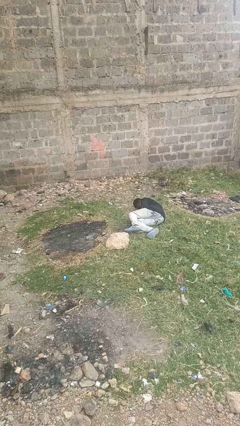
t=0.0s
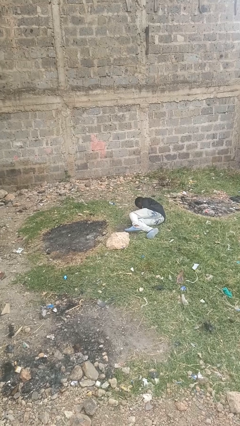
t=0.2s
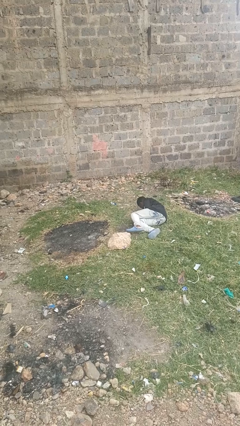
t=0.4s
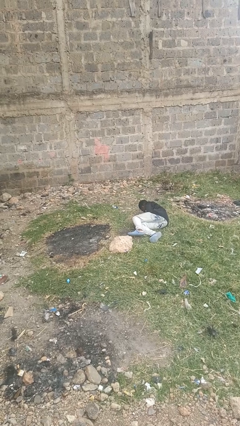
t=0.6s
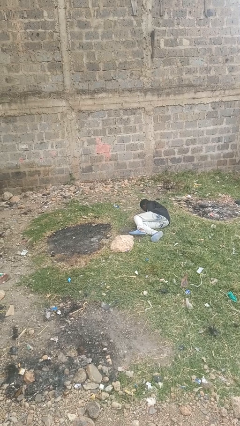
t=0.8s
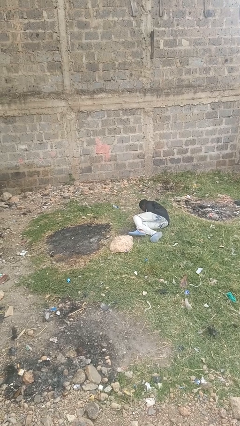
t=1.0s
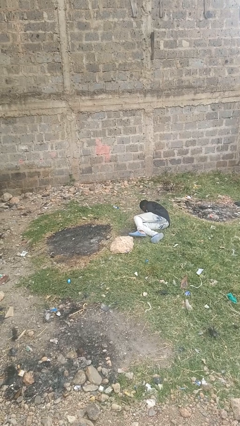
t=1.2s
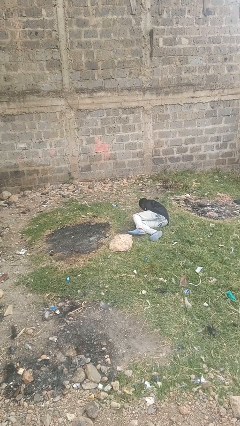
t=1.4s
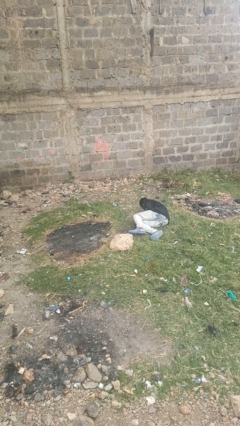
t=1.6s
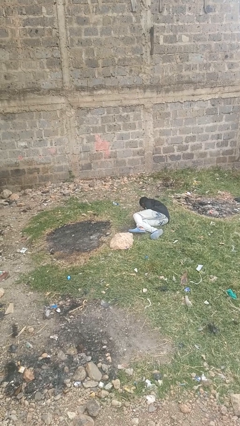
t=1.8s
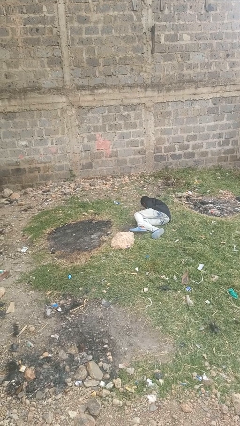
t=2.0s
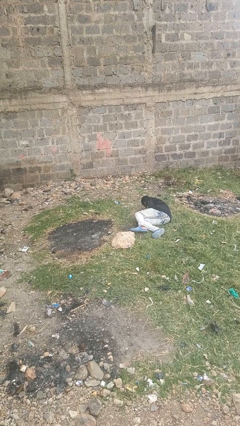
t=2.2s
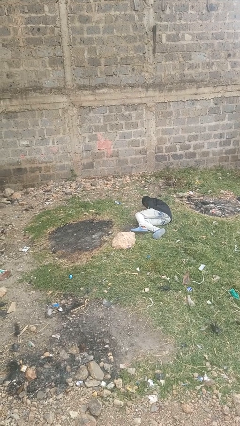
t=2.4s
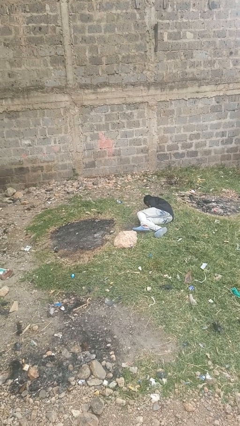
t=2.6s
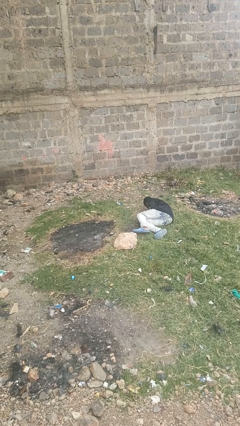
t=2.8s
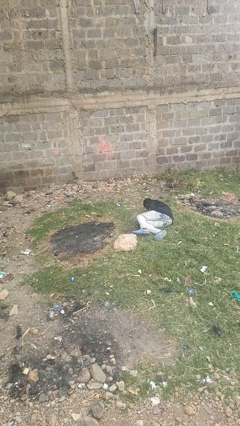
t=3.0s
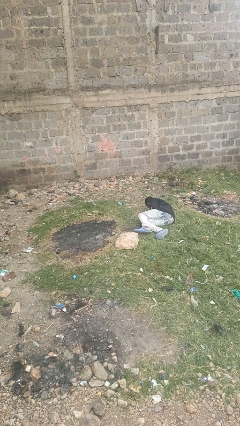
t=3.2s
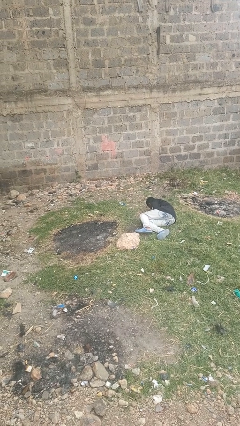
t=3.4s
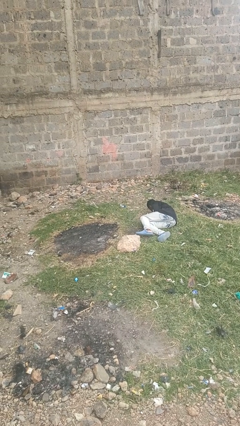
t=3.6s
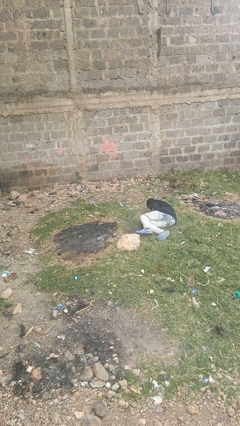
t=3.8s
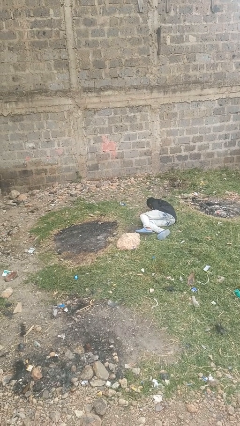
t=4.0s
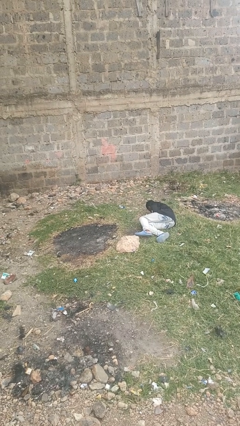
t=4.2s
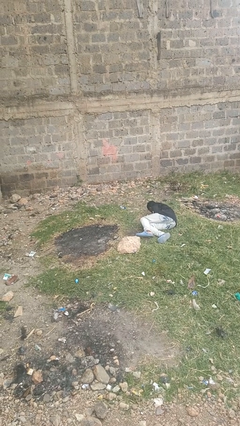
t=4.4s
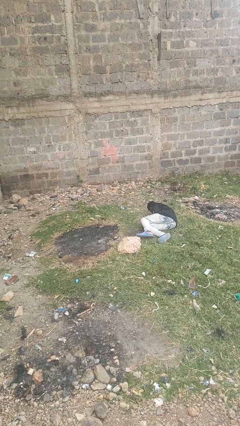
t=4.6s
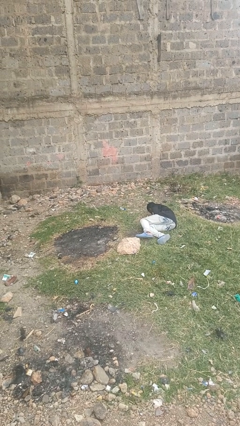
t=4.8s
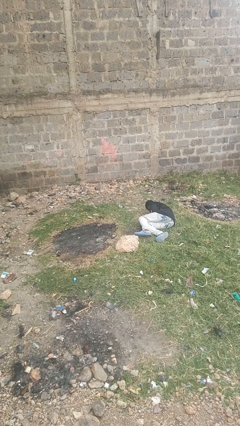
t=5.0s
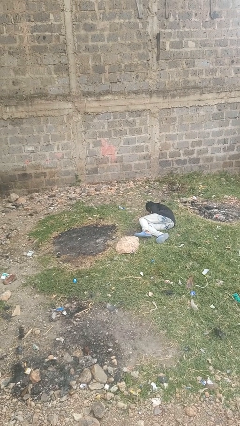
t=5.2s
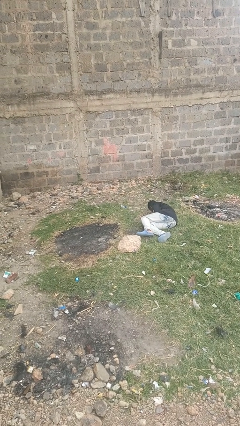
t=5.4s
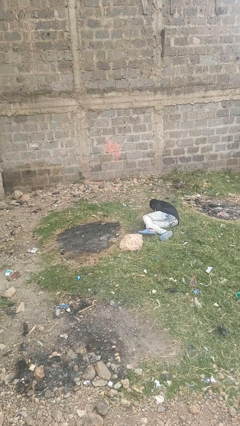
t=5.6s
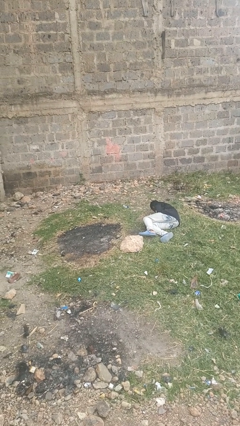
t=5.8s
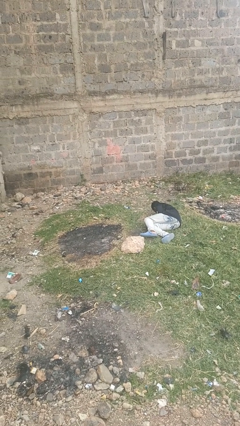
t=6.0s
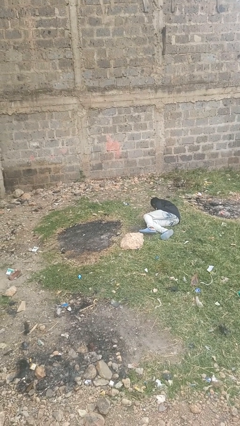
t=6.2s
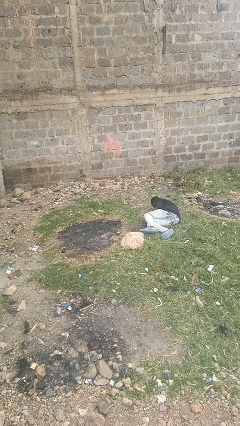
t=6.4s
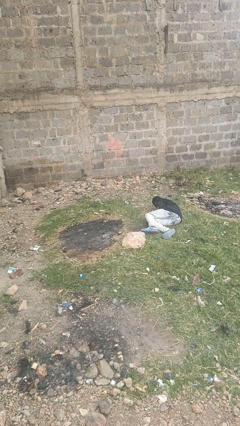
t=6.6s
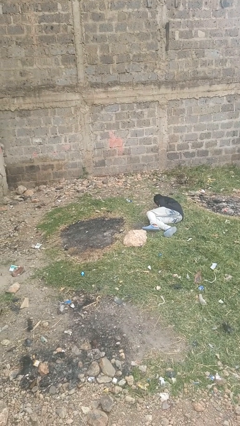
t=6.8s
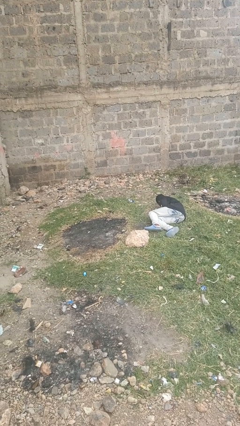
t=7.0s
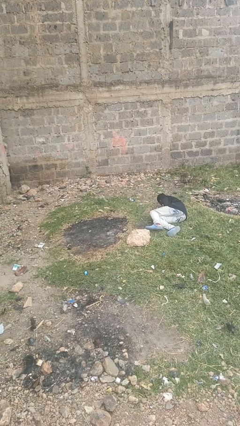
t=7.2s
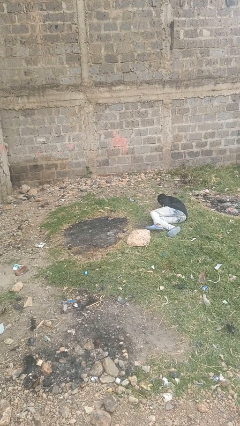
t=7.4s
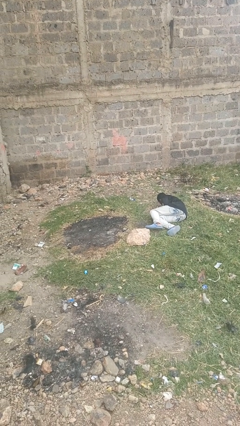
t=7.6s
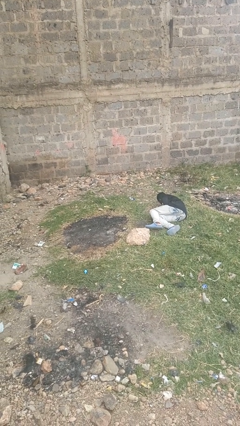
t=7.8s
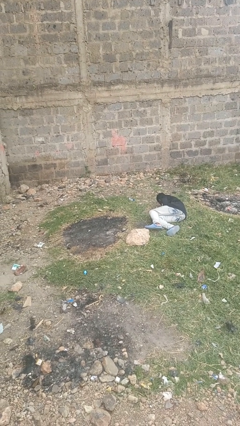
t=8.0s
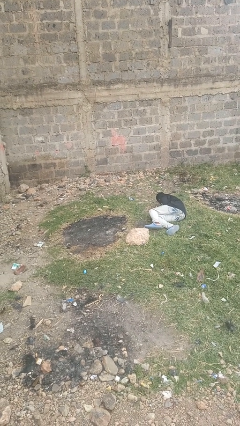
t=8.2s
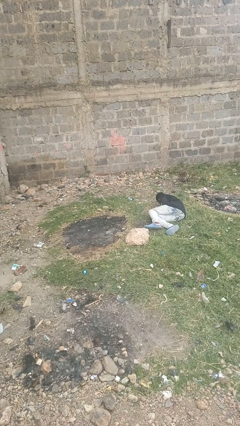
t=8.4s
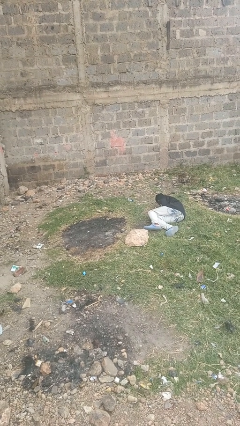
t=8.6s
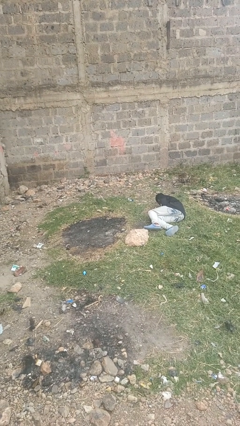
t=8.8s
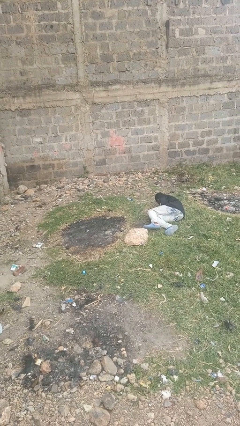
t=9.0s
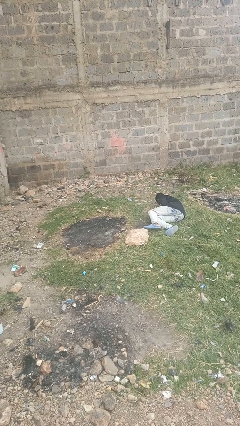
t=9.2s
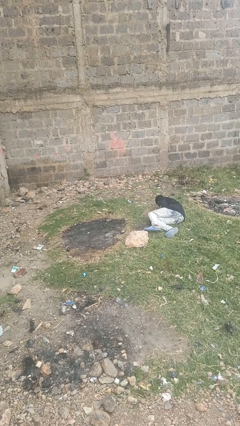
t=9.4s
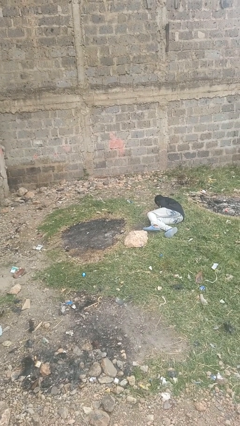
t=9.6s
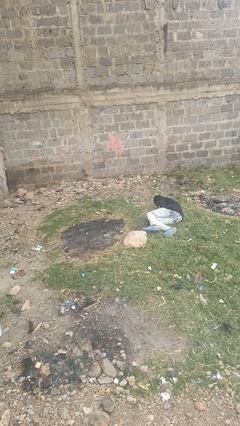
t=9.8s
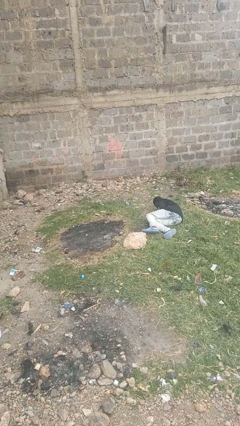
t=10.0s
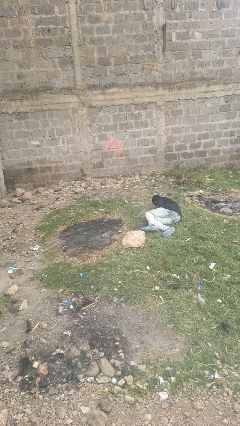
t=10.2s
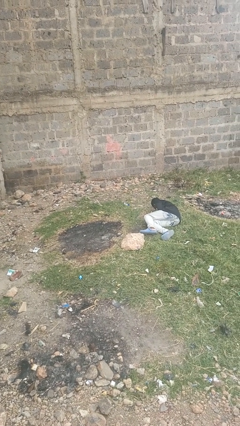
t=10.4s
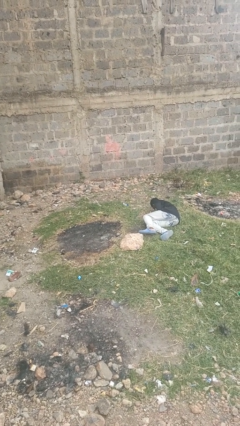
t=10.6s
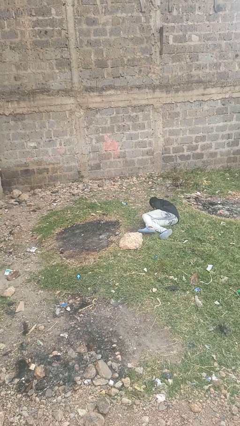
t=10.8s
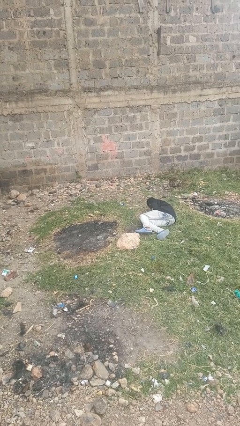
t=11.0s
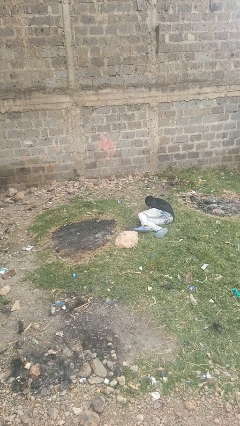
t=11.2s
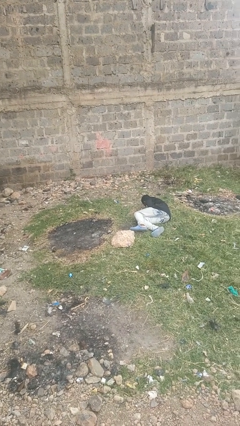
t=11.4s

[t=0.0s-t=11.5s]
person lies down on floor

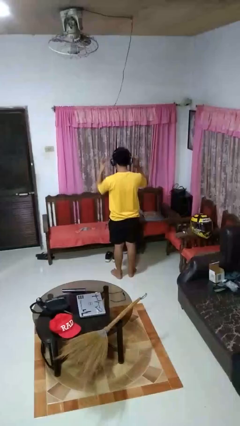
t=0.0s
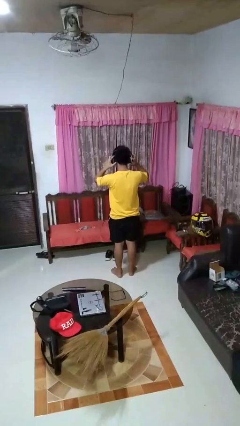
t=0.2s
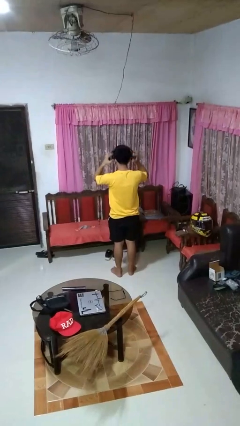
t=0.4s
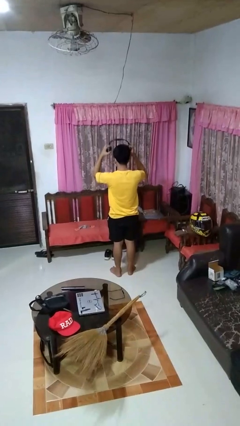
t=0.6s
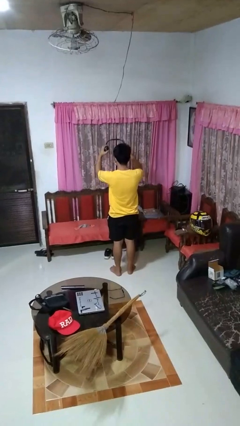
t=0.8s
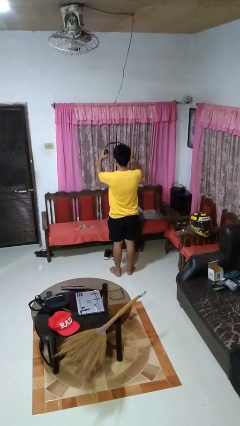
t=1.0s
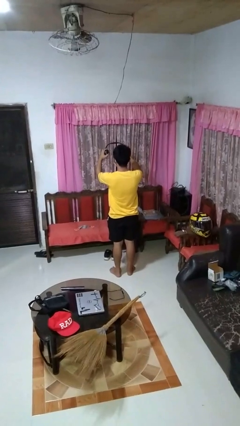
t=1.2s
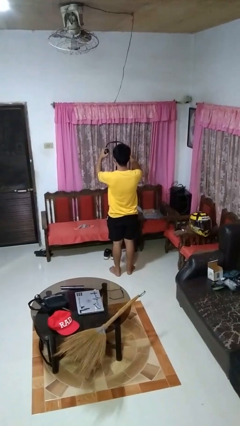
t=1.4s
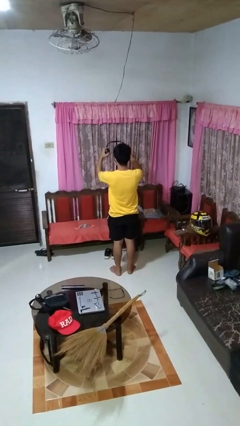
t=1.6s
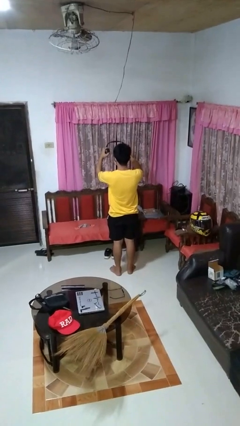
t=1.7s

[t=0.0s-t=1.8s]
person takes off headphones

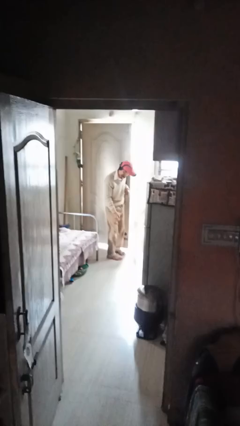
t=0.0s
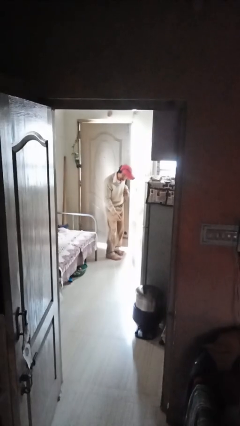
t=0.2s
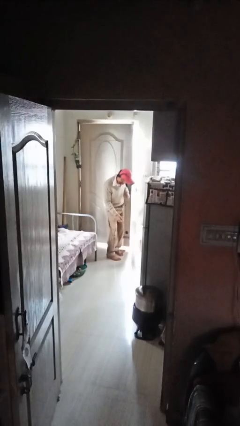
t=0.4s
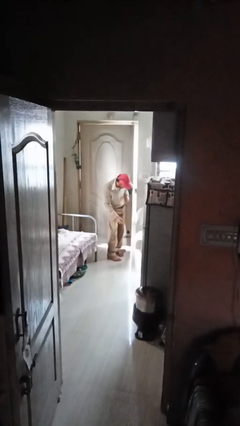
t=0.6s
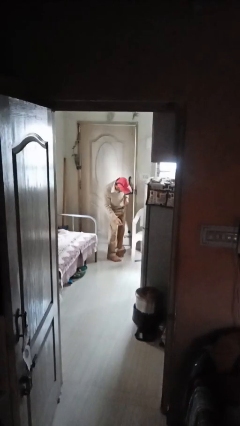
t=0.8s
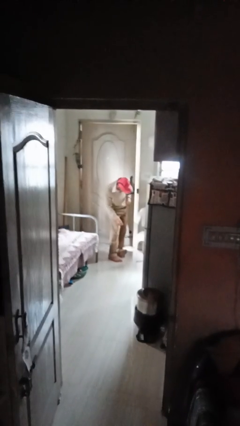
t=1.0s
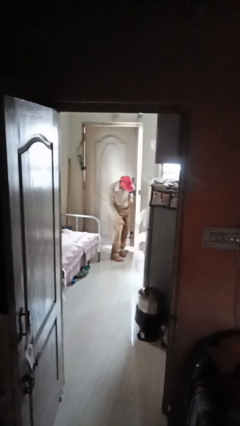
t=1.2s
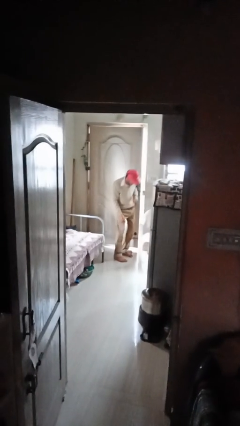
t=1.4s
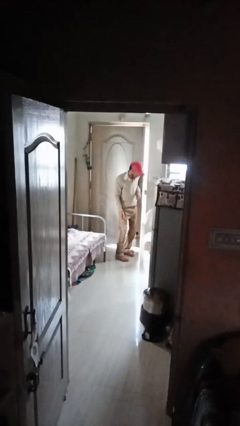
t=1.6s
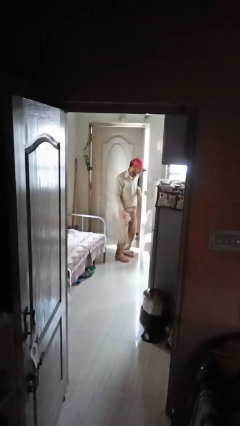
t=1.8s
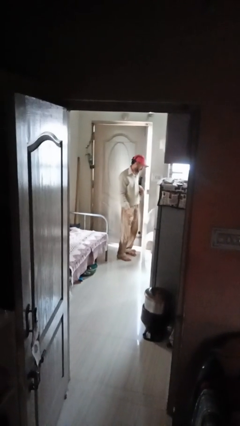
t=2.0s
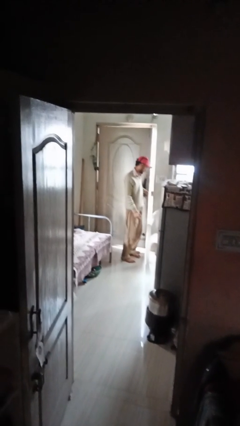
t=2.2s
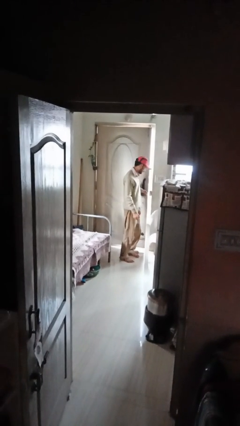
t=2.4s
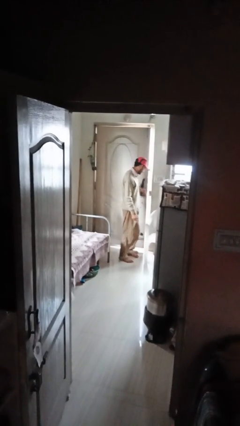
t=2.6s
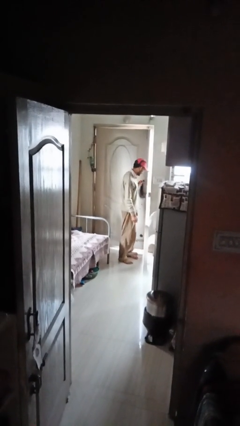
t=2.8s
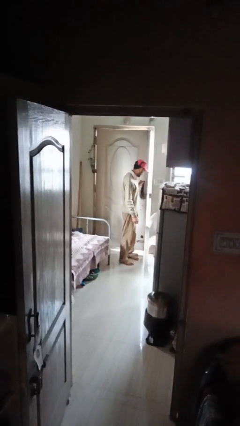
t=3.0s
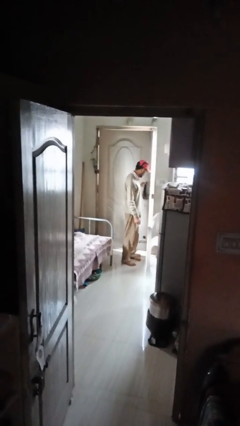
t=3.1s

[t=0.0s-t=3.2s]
person closes door with hip

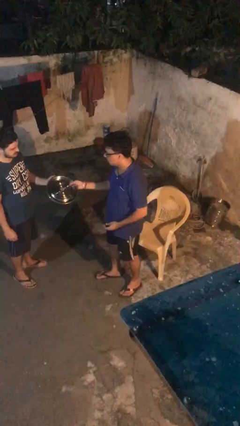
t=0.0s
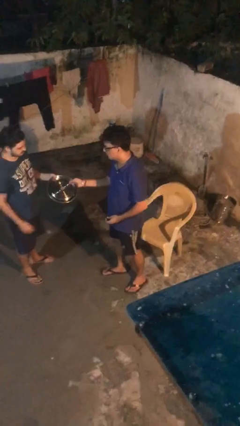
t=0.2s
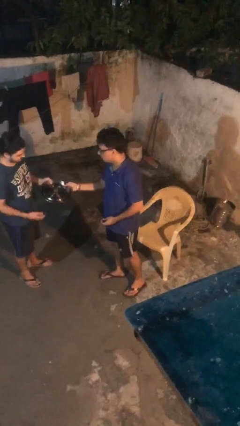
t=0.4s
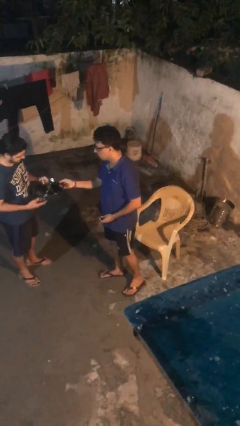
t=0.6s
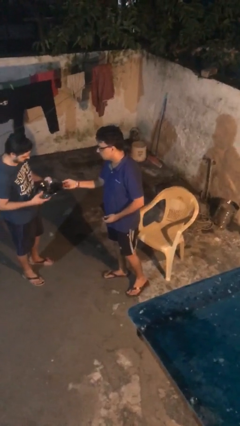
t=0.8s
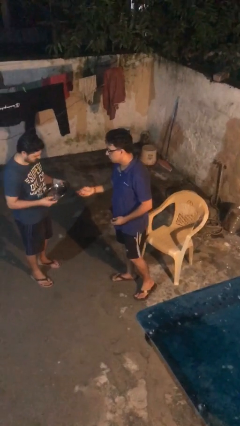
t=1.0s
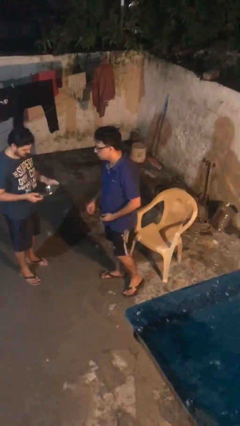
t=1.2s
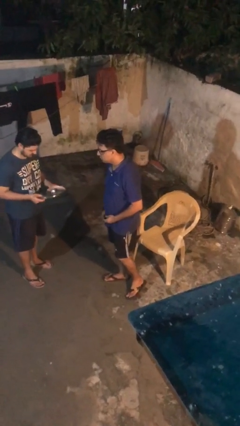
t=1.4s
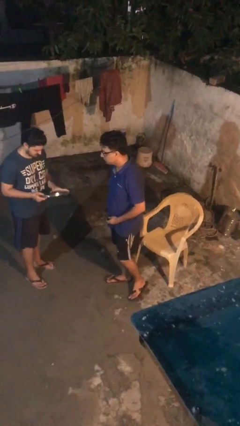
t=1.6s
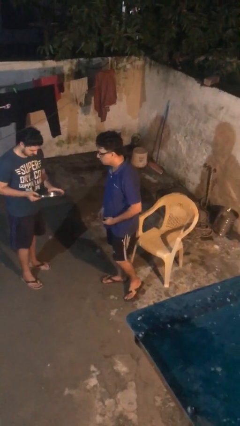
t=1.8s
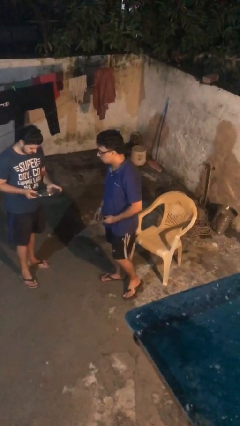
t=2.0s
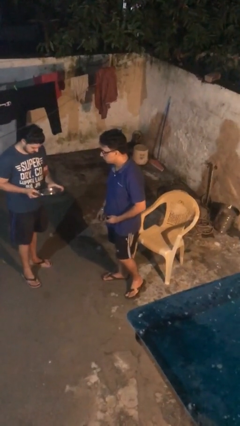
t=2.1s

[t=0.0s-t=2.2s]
person transfers object to person
